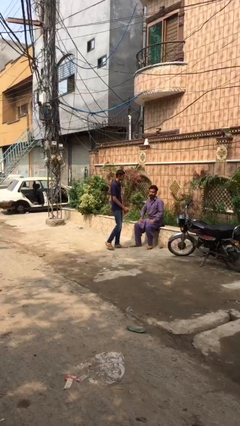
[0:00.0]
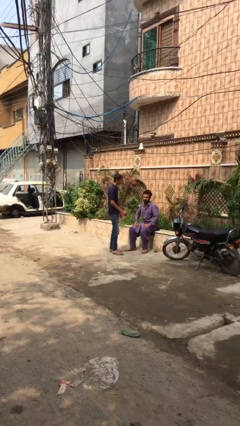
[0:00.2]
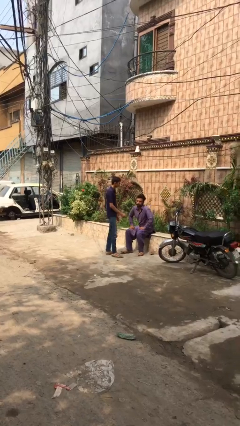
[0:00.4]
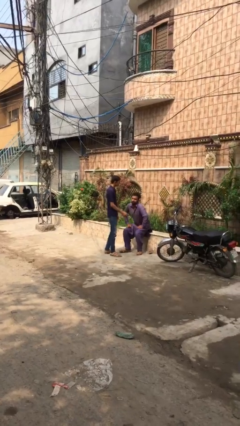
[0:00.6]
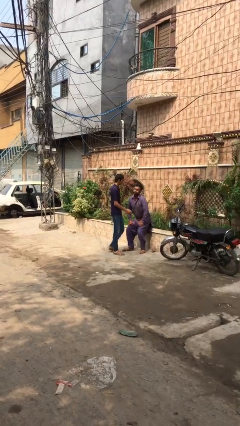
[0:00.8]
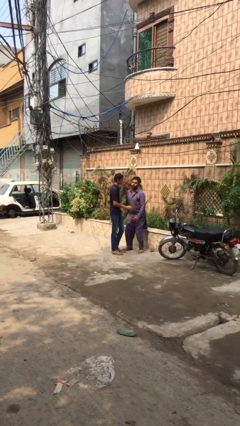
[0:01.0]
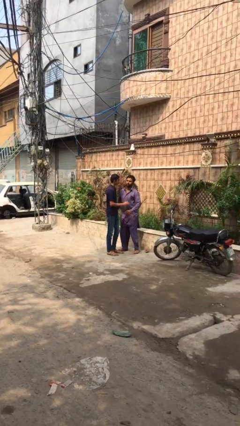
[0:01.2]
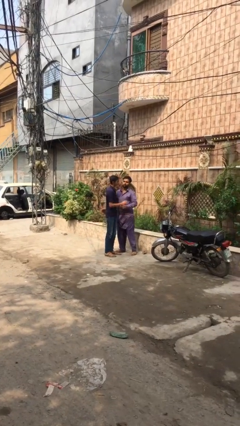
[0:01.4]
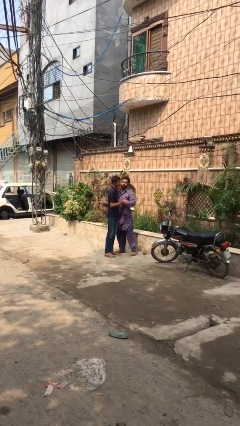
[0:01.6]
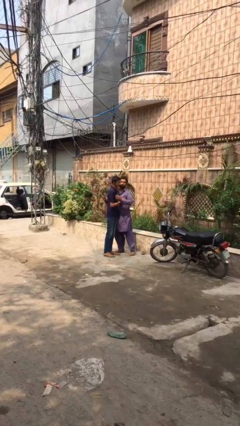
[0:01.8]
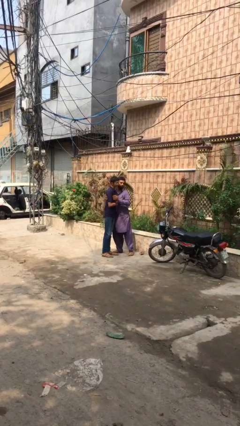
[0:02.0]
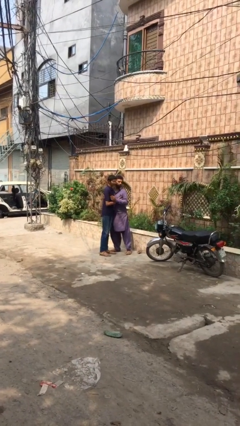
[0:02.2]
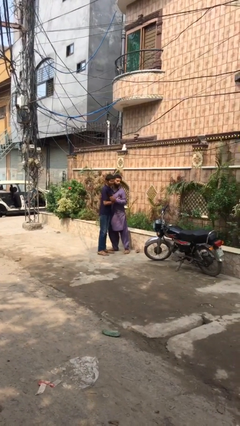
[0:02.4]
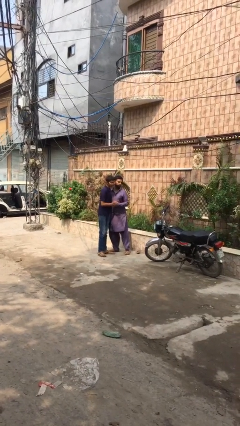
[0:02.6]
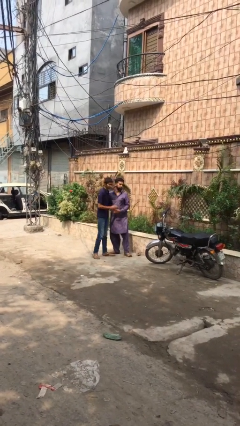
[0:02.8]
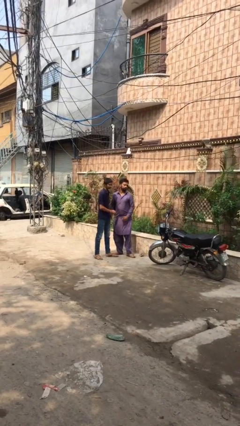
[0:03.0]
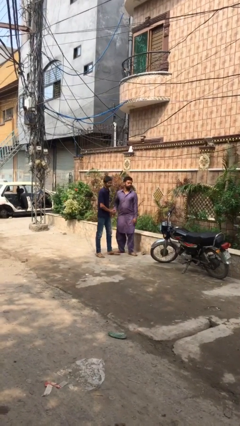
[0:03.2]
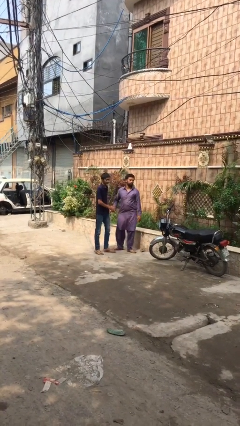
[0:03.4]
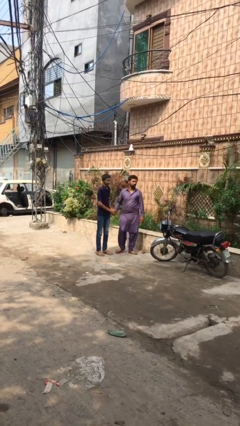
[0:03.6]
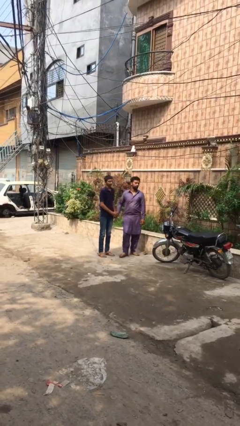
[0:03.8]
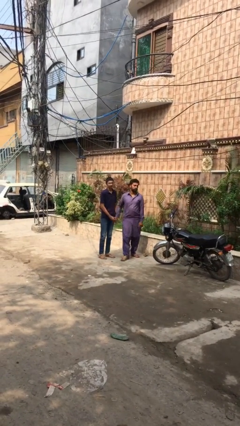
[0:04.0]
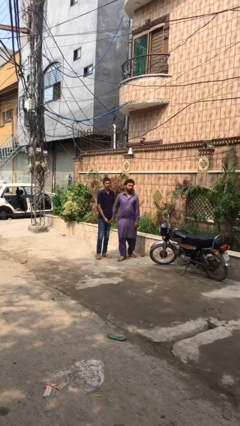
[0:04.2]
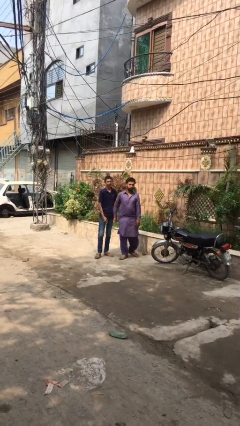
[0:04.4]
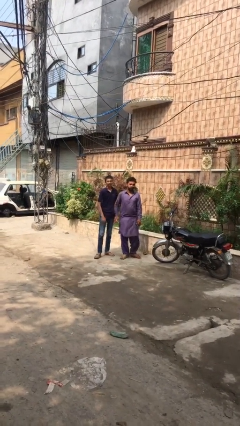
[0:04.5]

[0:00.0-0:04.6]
person embraces person

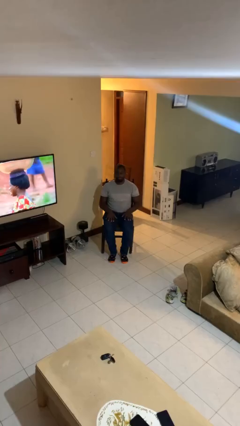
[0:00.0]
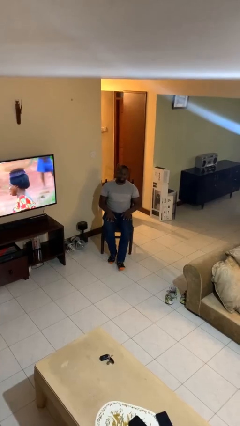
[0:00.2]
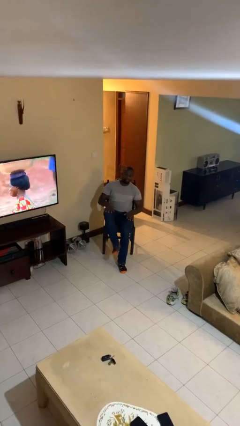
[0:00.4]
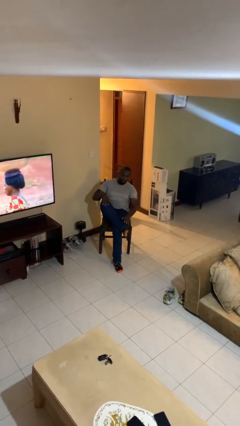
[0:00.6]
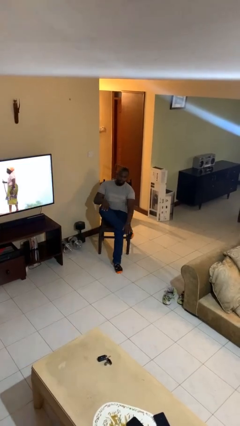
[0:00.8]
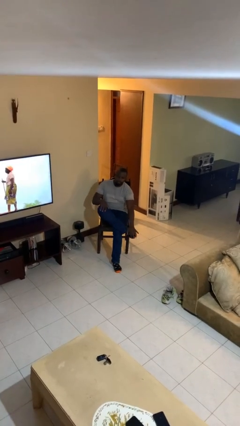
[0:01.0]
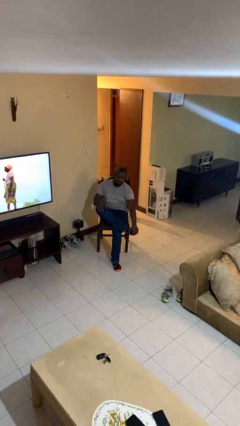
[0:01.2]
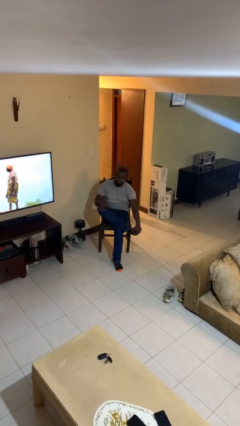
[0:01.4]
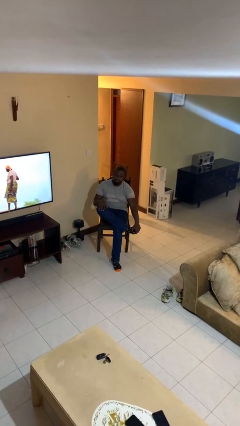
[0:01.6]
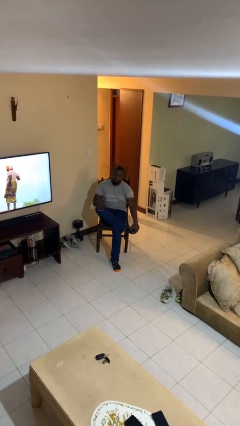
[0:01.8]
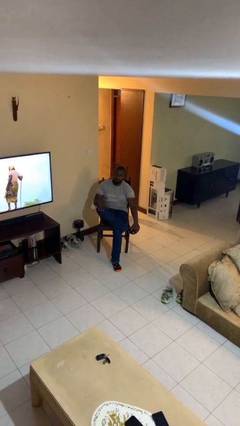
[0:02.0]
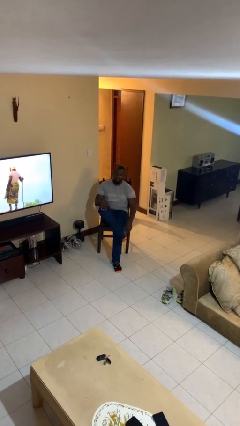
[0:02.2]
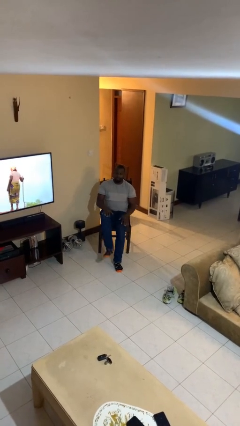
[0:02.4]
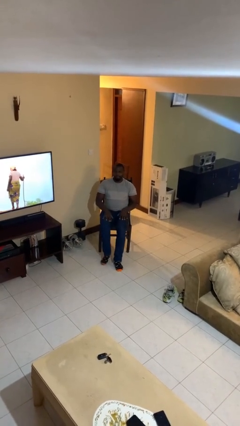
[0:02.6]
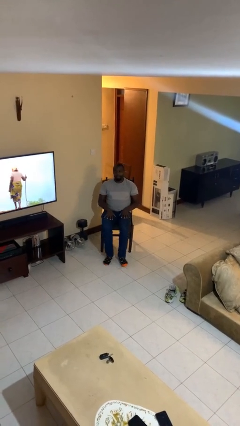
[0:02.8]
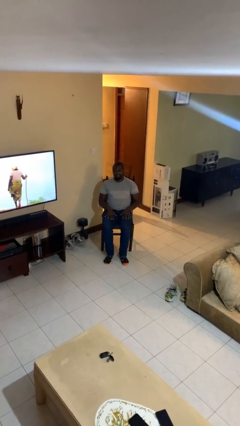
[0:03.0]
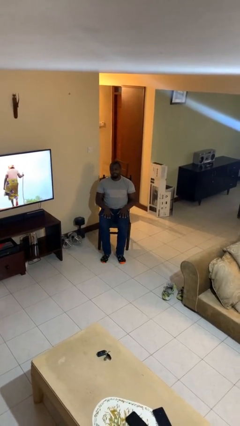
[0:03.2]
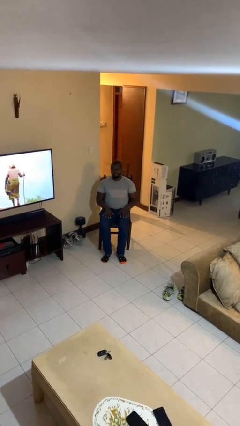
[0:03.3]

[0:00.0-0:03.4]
person crosses legs

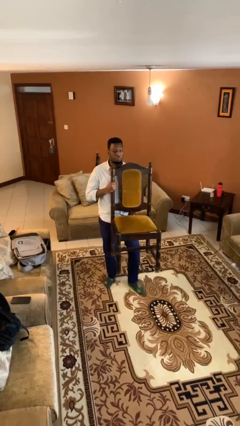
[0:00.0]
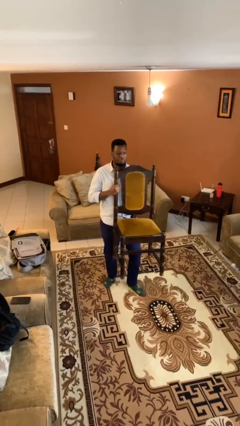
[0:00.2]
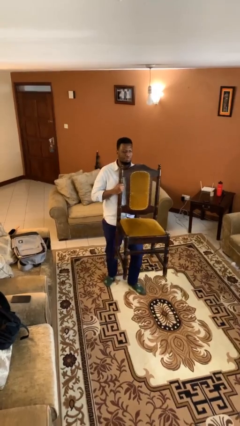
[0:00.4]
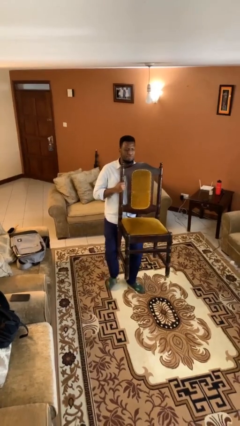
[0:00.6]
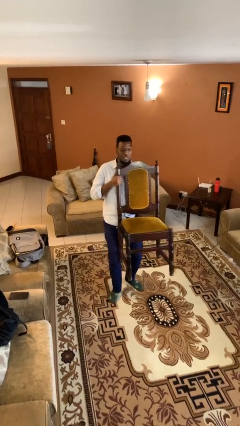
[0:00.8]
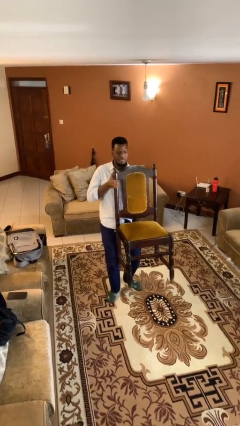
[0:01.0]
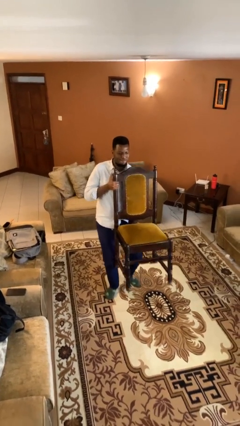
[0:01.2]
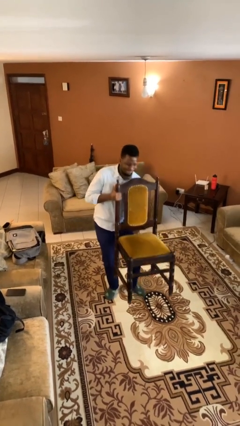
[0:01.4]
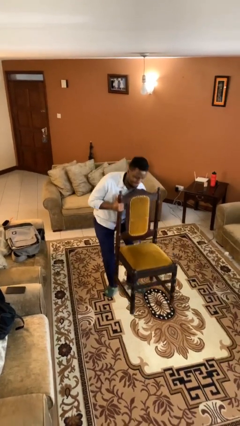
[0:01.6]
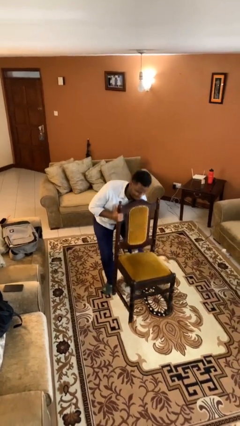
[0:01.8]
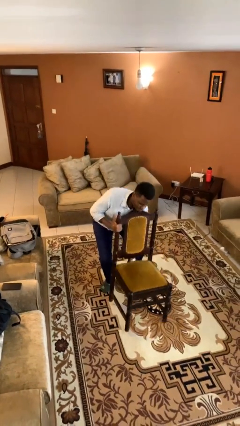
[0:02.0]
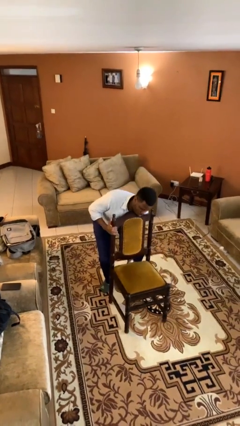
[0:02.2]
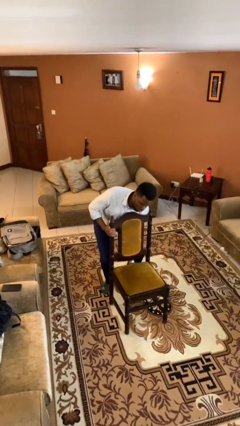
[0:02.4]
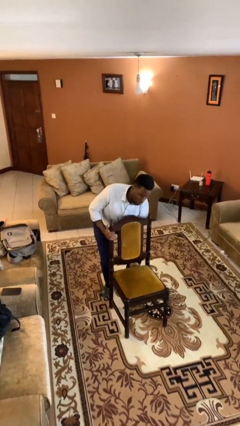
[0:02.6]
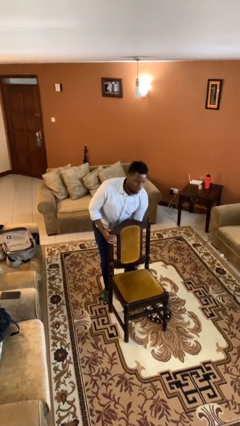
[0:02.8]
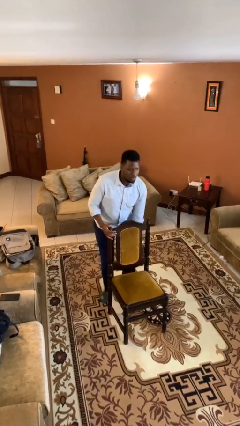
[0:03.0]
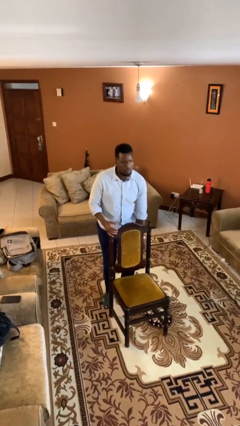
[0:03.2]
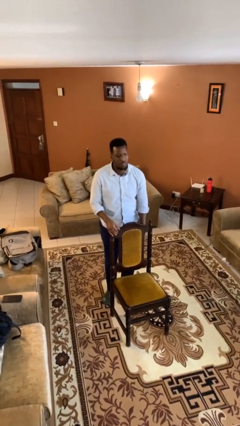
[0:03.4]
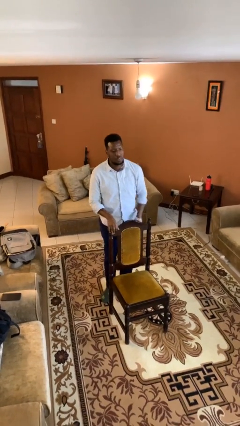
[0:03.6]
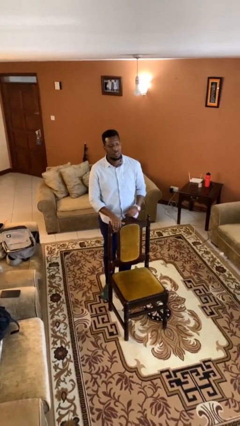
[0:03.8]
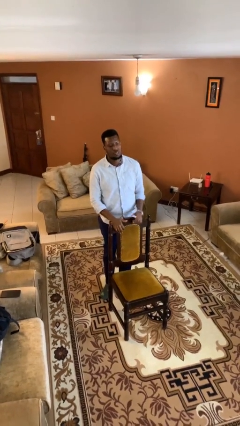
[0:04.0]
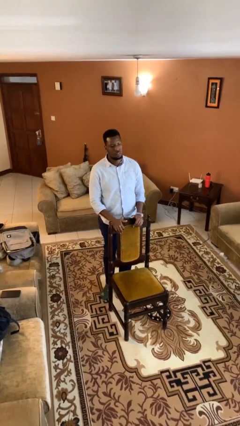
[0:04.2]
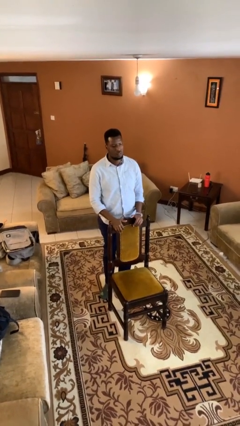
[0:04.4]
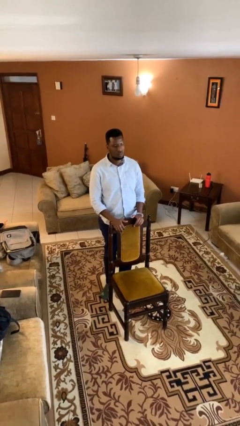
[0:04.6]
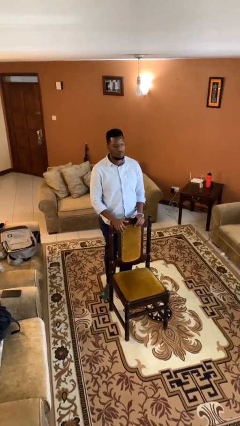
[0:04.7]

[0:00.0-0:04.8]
person puts down object on floor

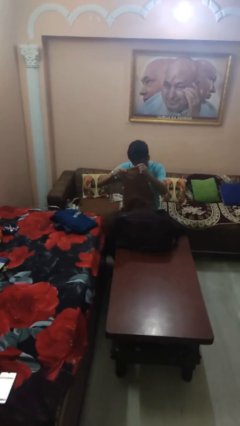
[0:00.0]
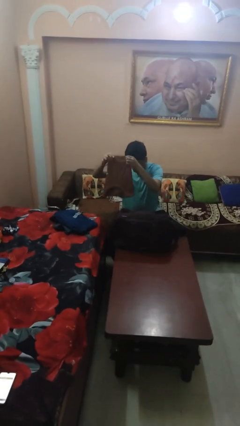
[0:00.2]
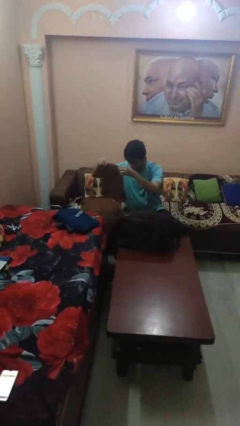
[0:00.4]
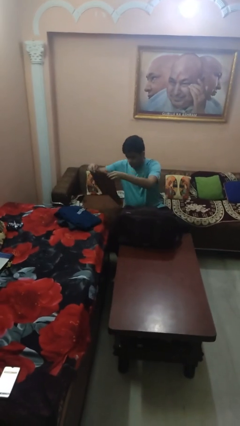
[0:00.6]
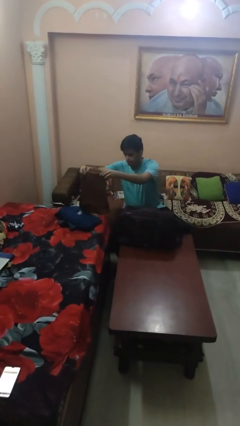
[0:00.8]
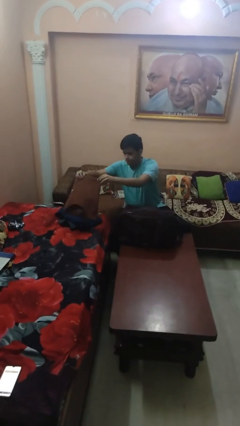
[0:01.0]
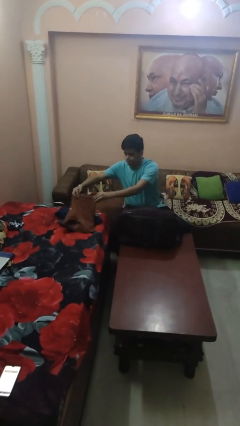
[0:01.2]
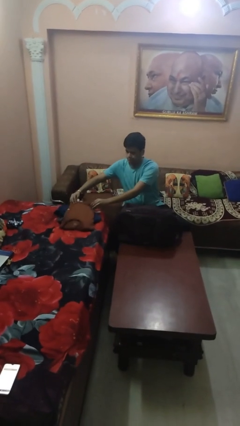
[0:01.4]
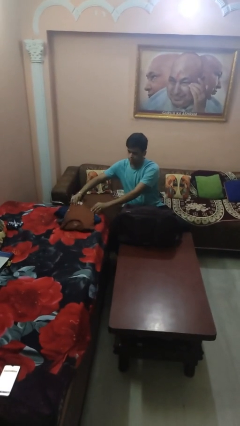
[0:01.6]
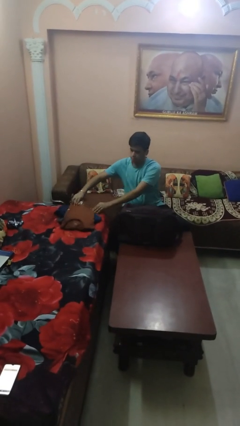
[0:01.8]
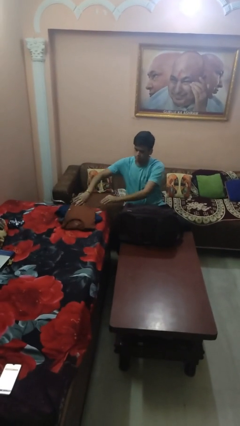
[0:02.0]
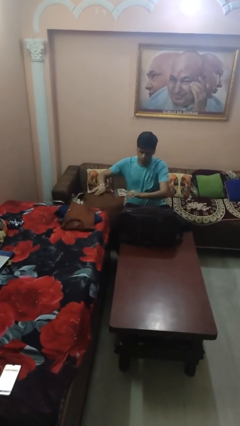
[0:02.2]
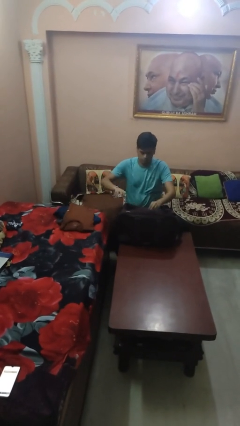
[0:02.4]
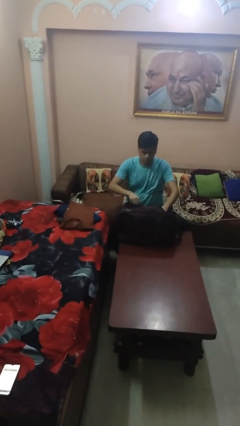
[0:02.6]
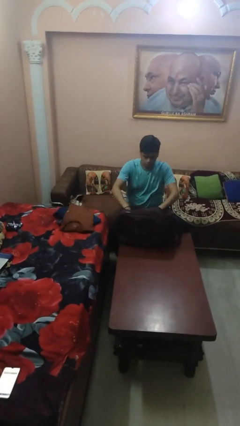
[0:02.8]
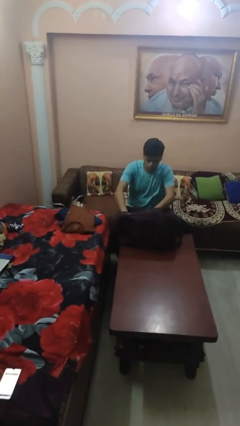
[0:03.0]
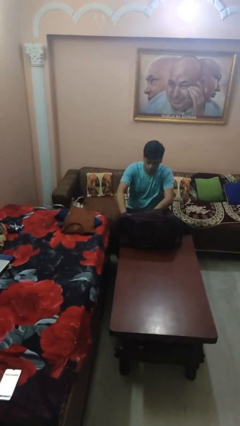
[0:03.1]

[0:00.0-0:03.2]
person unloads clothes from suitcase

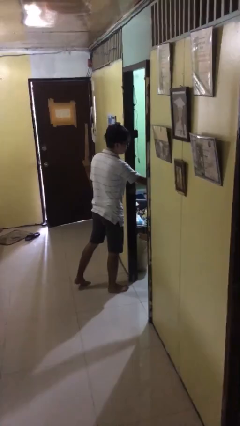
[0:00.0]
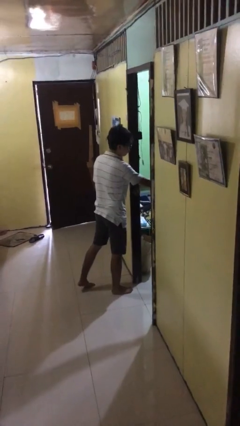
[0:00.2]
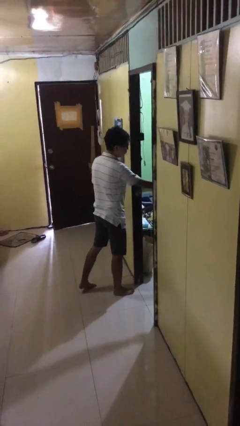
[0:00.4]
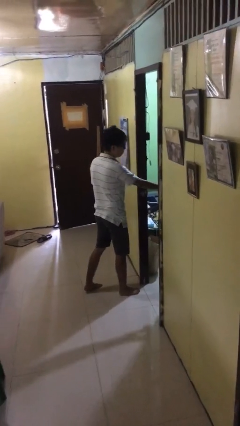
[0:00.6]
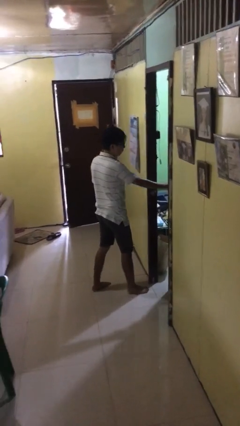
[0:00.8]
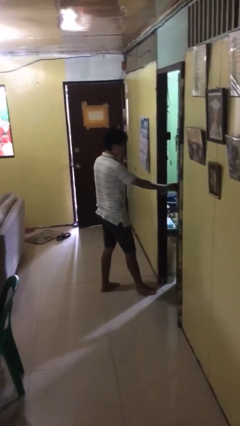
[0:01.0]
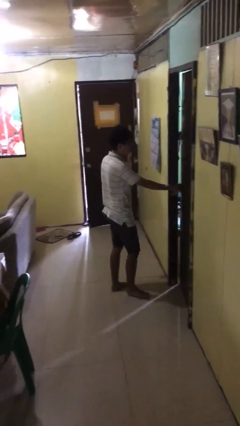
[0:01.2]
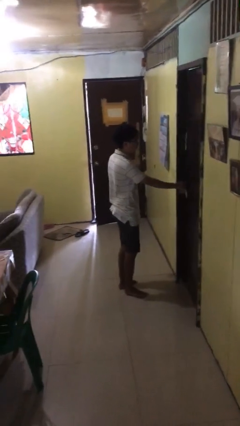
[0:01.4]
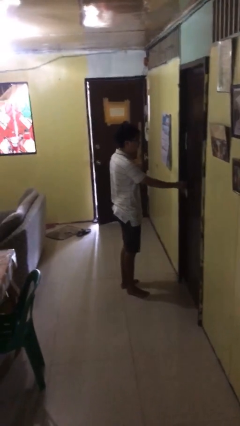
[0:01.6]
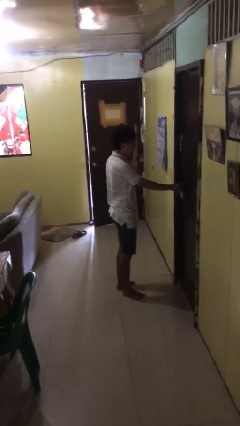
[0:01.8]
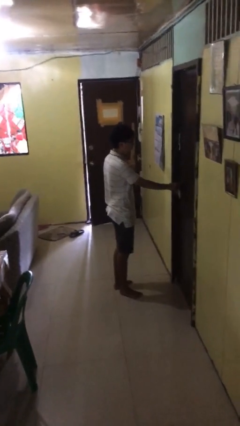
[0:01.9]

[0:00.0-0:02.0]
person closes facility door
